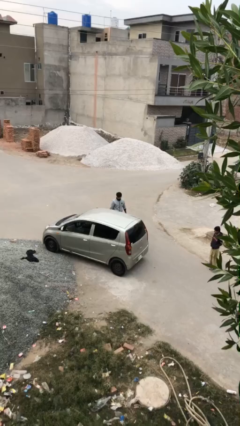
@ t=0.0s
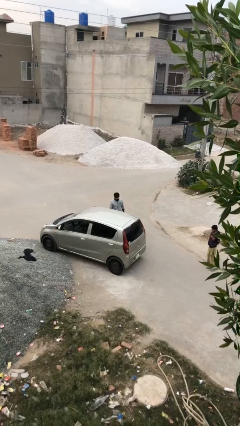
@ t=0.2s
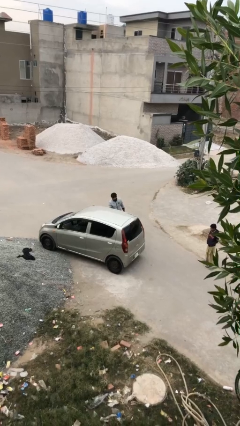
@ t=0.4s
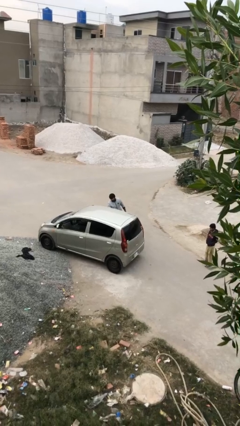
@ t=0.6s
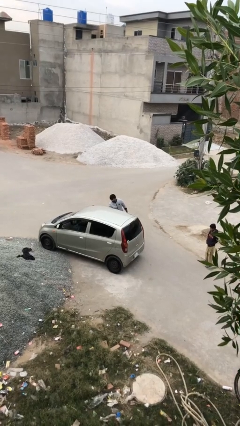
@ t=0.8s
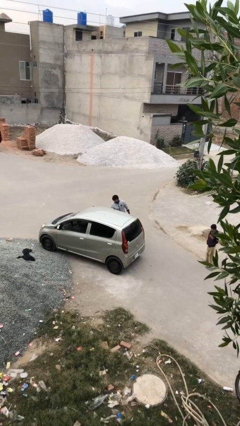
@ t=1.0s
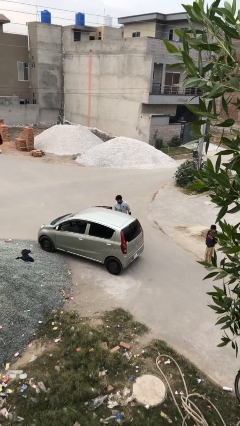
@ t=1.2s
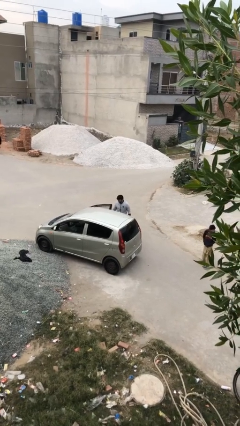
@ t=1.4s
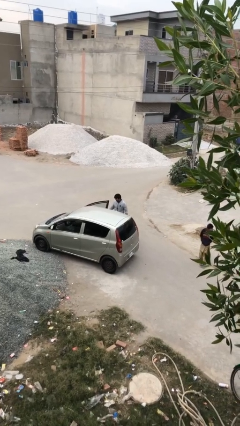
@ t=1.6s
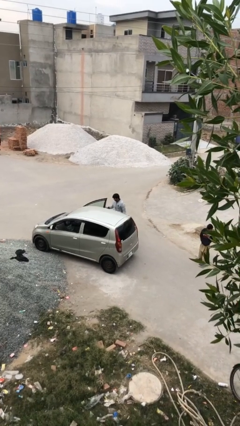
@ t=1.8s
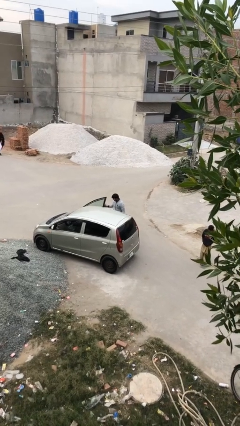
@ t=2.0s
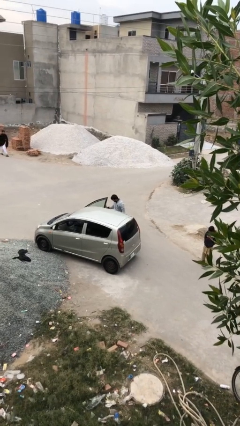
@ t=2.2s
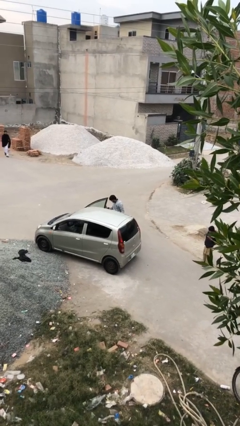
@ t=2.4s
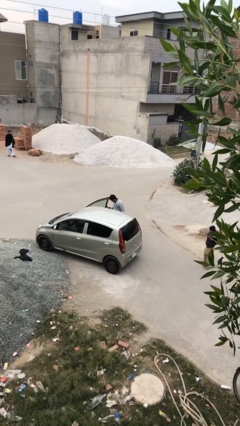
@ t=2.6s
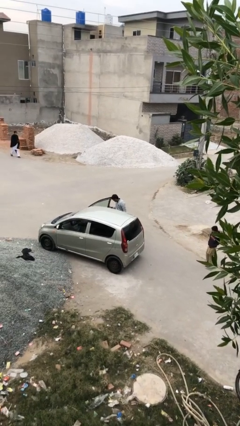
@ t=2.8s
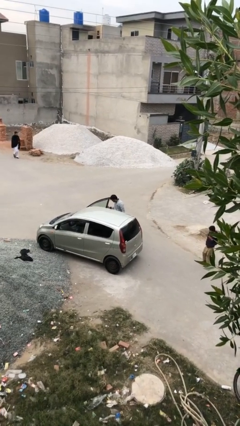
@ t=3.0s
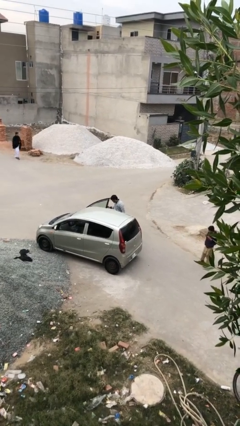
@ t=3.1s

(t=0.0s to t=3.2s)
person opens car door

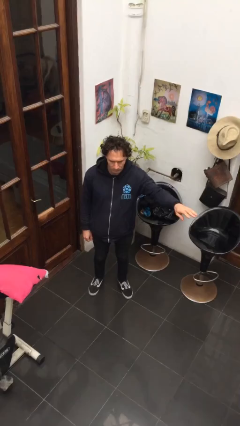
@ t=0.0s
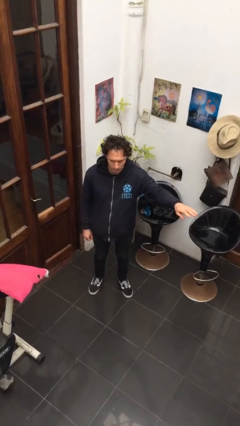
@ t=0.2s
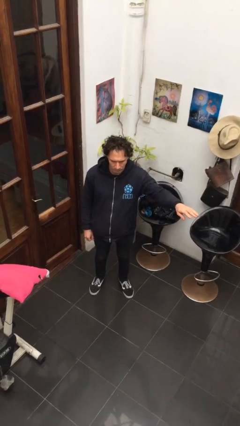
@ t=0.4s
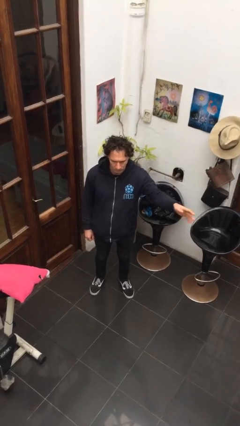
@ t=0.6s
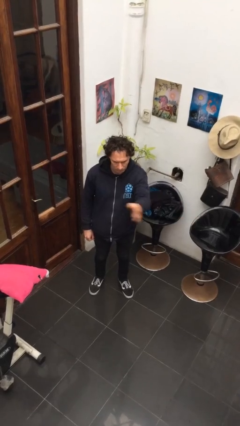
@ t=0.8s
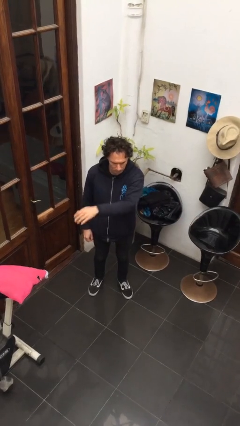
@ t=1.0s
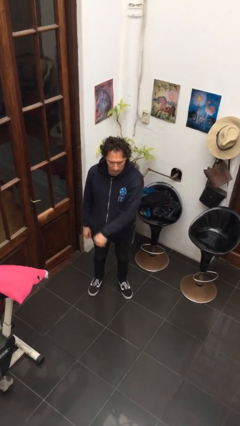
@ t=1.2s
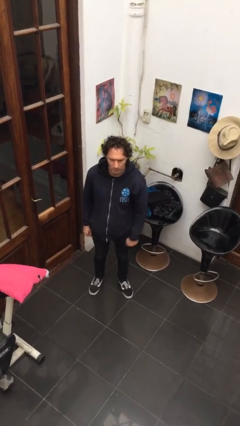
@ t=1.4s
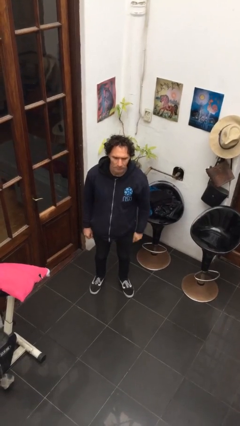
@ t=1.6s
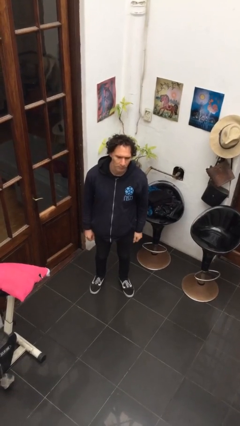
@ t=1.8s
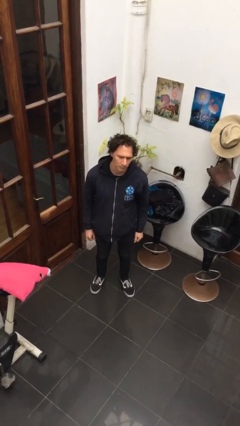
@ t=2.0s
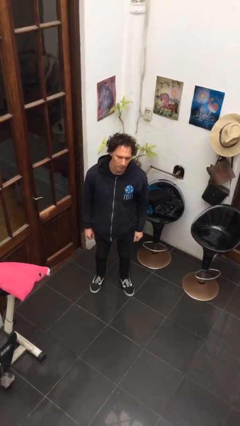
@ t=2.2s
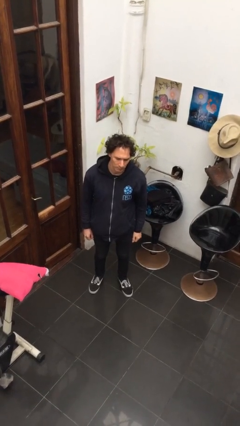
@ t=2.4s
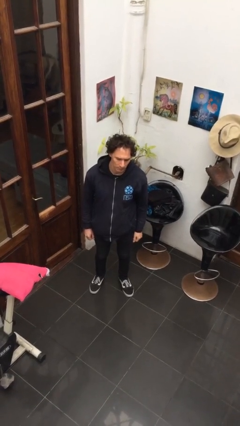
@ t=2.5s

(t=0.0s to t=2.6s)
person gestures swipe right

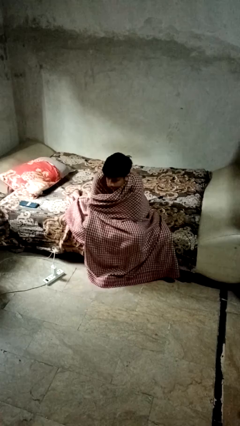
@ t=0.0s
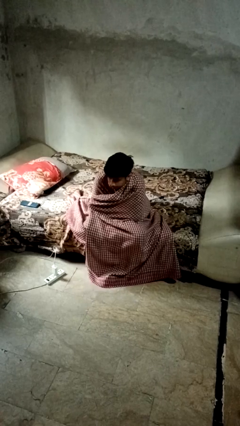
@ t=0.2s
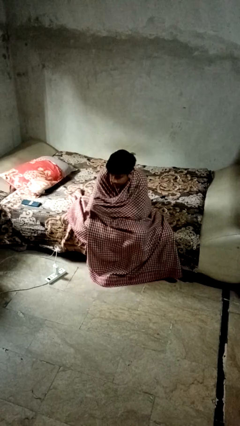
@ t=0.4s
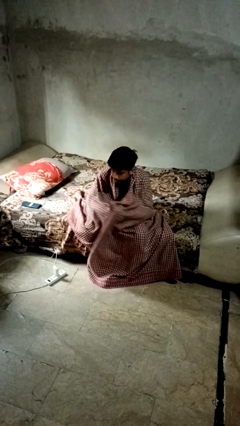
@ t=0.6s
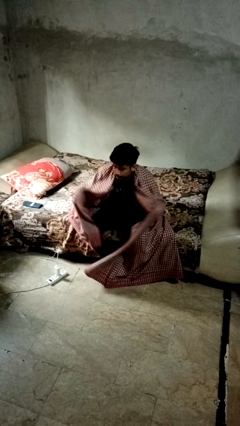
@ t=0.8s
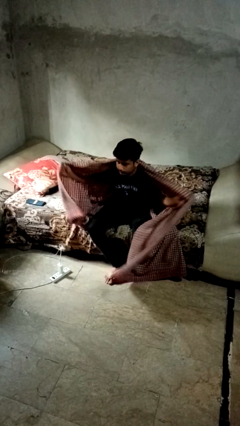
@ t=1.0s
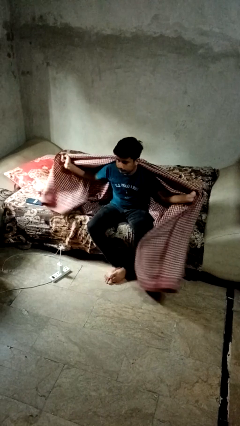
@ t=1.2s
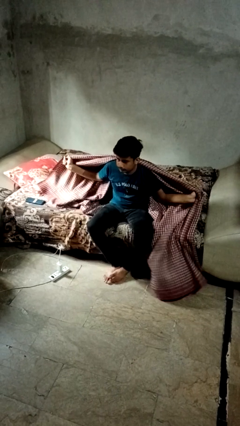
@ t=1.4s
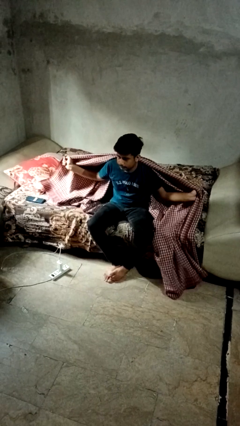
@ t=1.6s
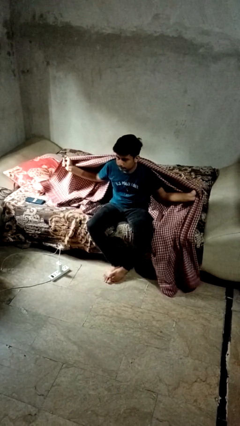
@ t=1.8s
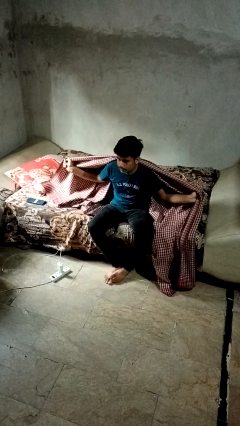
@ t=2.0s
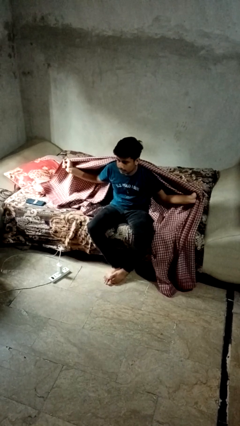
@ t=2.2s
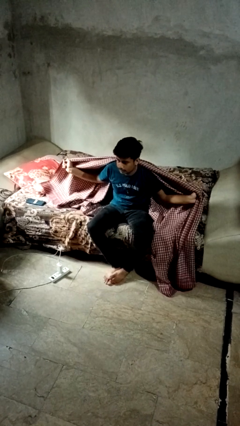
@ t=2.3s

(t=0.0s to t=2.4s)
person uncovers with blanket

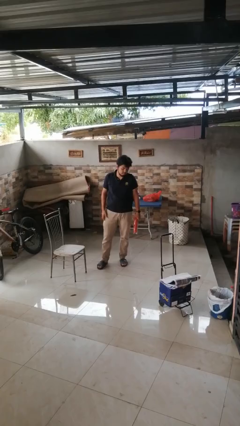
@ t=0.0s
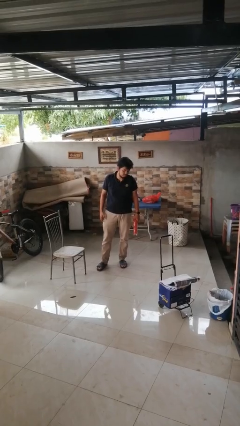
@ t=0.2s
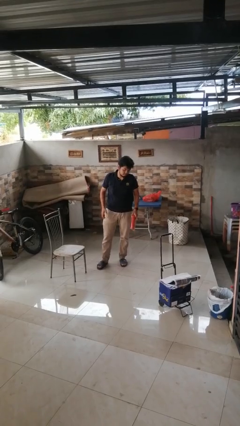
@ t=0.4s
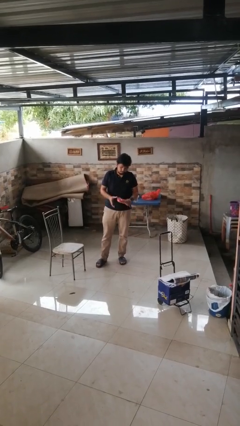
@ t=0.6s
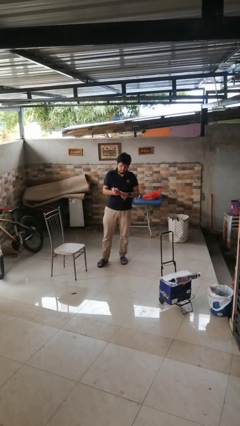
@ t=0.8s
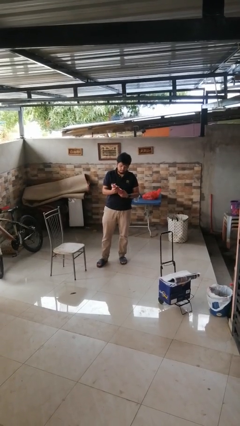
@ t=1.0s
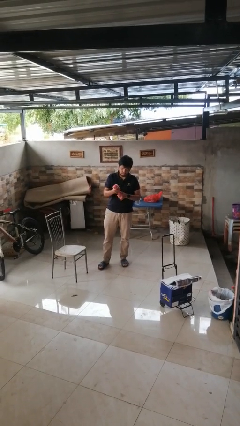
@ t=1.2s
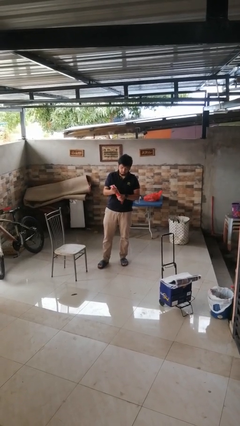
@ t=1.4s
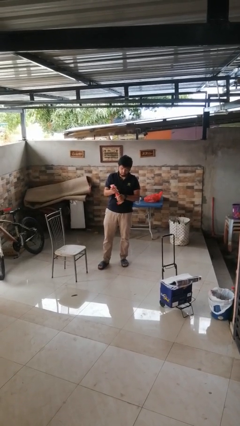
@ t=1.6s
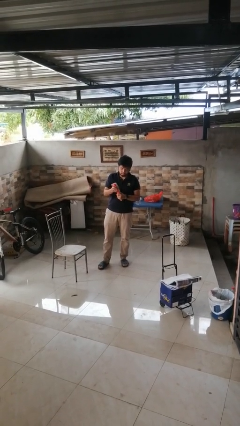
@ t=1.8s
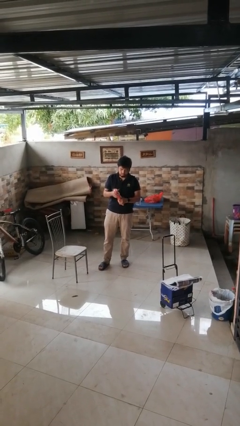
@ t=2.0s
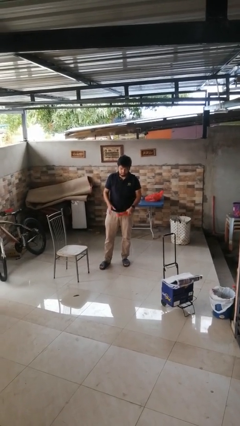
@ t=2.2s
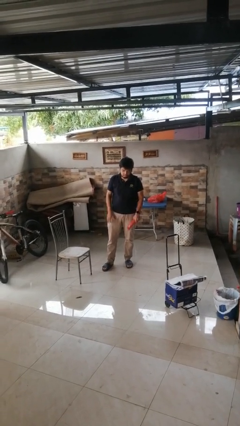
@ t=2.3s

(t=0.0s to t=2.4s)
person squeezes object

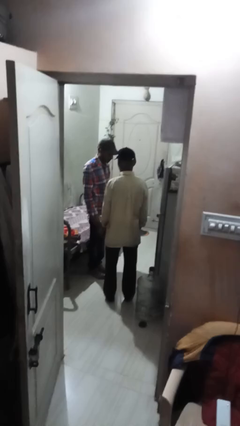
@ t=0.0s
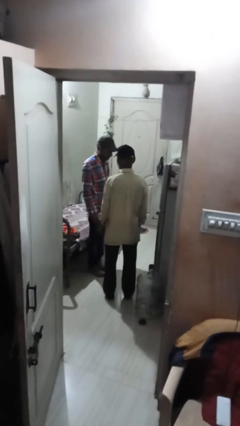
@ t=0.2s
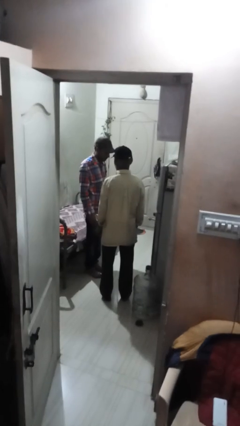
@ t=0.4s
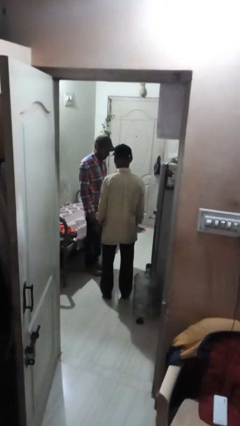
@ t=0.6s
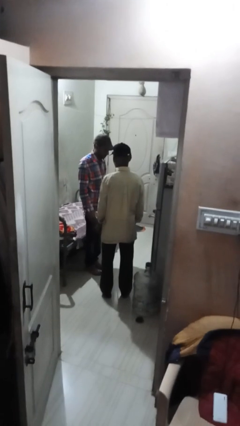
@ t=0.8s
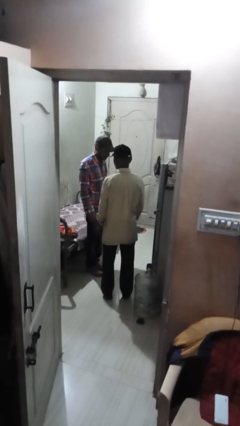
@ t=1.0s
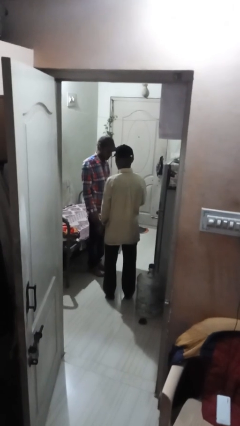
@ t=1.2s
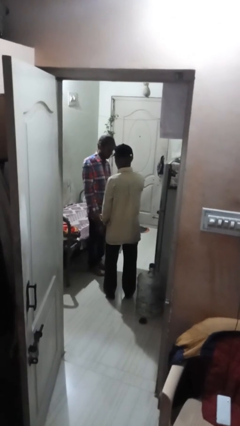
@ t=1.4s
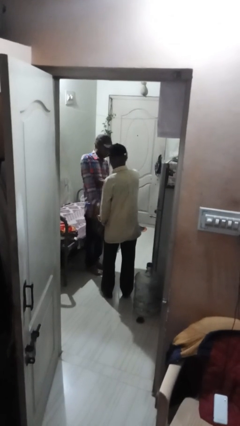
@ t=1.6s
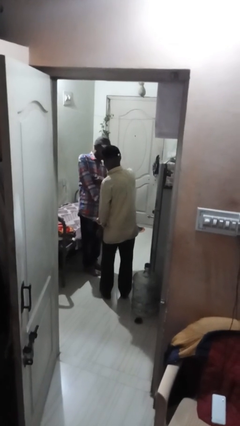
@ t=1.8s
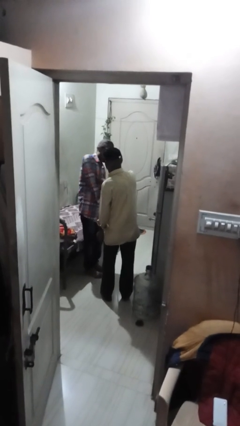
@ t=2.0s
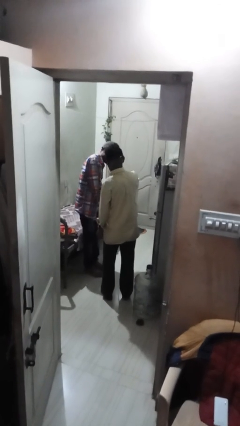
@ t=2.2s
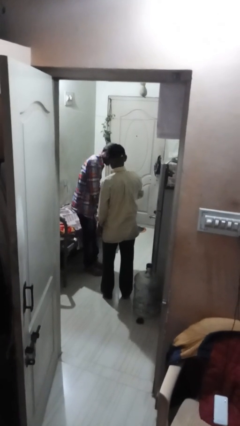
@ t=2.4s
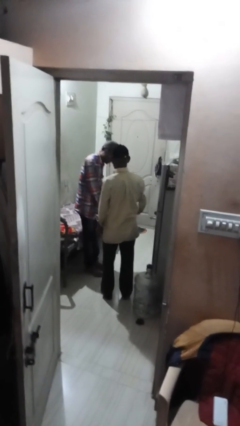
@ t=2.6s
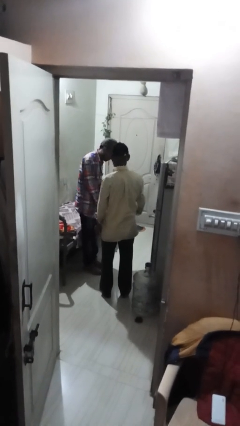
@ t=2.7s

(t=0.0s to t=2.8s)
person tickles person

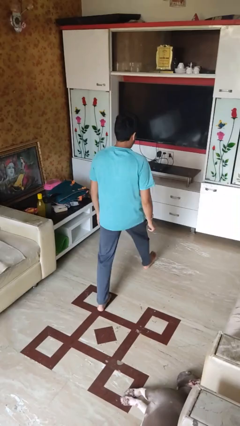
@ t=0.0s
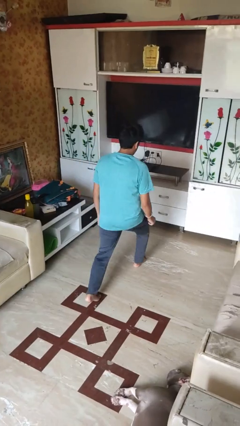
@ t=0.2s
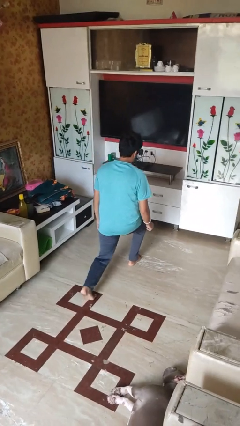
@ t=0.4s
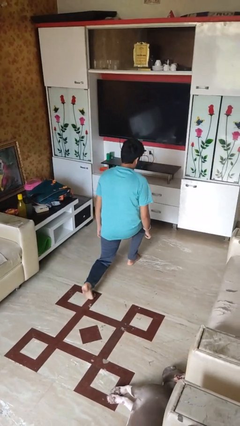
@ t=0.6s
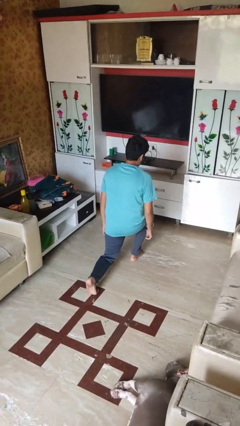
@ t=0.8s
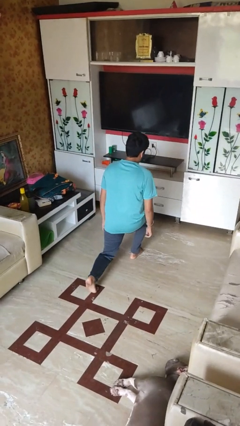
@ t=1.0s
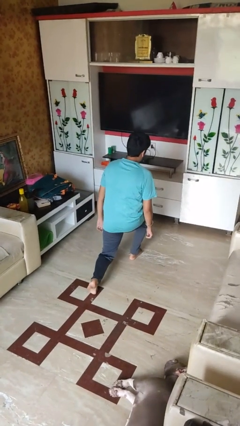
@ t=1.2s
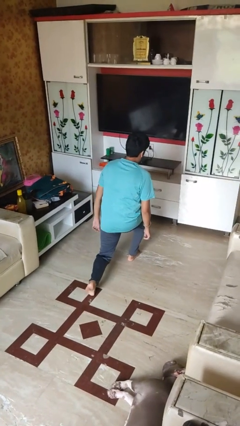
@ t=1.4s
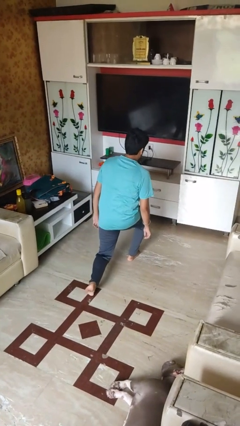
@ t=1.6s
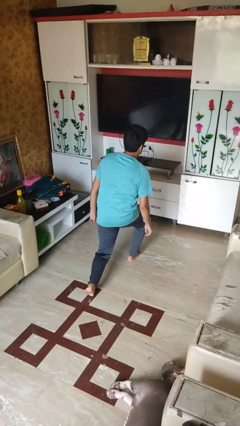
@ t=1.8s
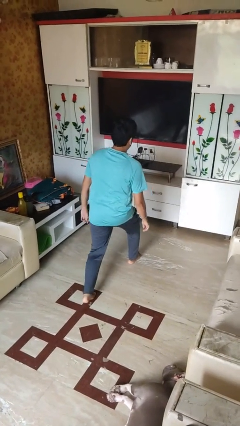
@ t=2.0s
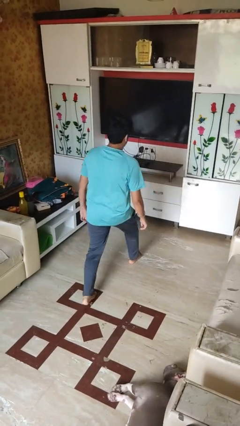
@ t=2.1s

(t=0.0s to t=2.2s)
person exercises with lunges

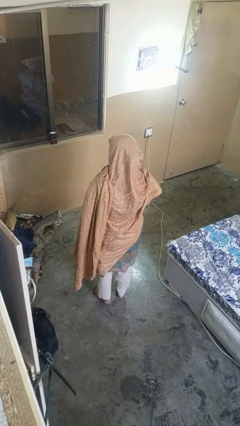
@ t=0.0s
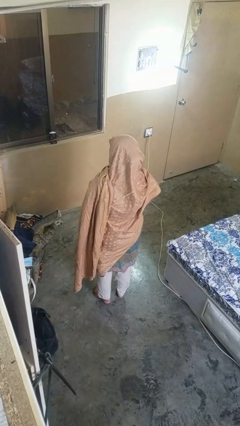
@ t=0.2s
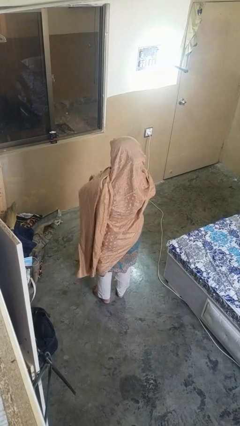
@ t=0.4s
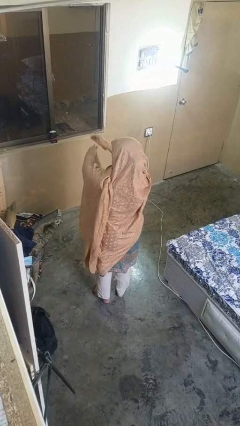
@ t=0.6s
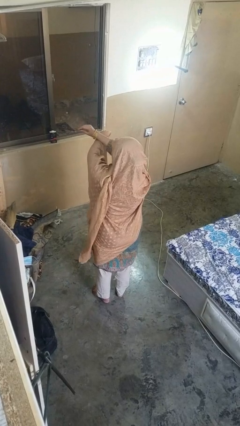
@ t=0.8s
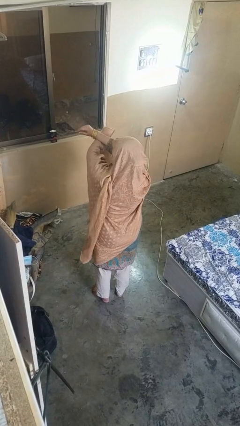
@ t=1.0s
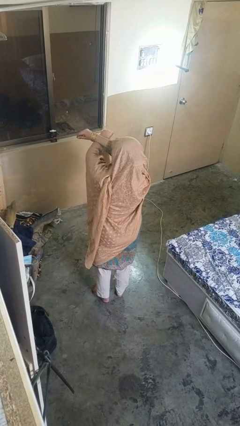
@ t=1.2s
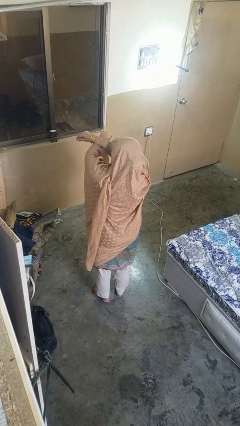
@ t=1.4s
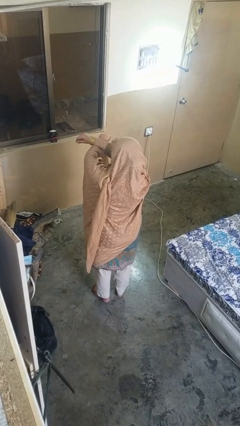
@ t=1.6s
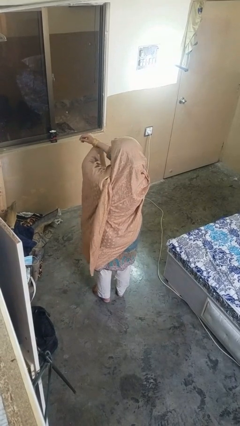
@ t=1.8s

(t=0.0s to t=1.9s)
person crosses arms
